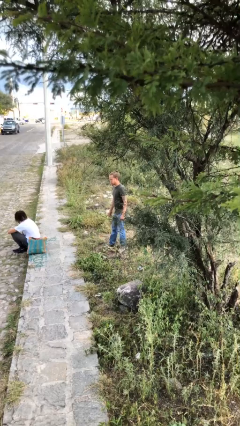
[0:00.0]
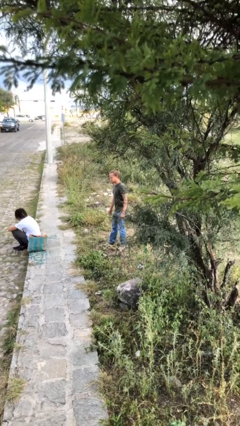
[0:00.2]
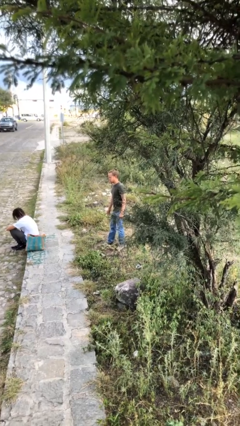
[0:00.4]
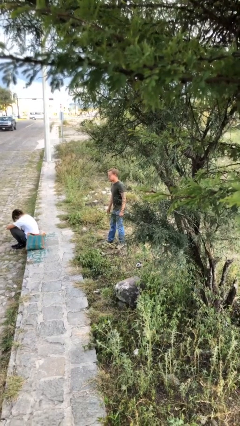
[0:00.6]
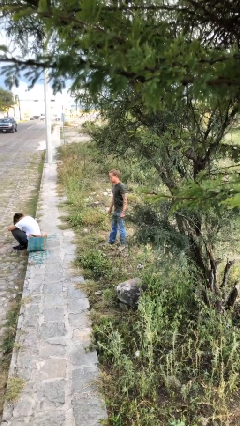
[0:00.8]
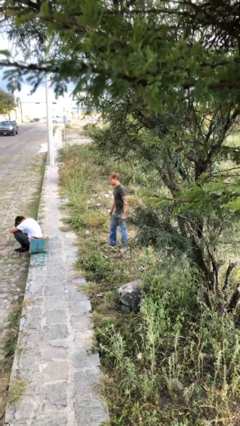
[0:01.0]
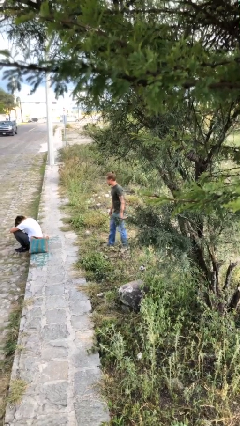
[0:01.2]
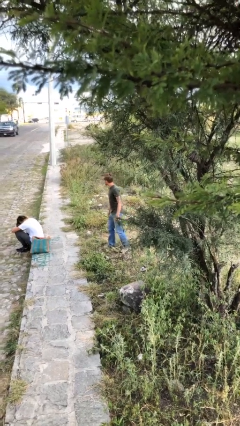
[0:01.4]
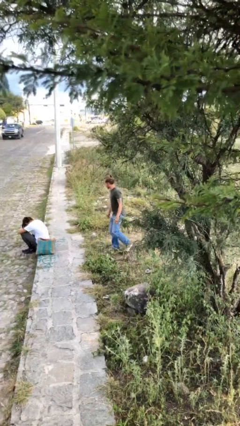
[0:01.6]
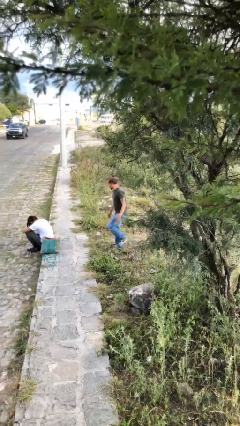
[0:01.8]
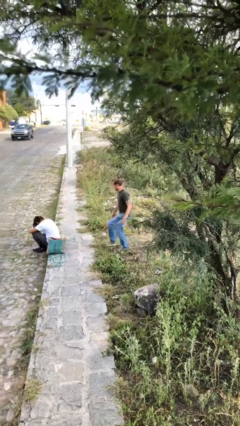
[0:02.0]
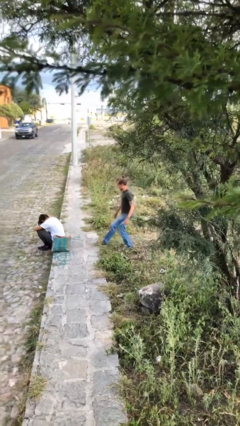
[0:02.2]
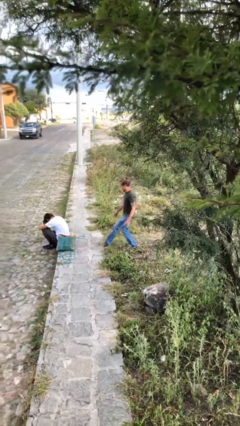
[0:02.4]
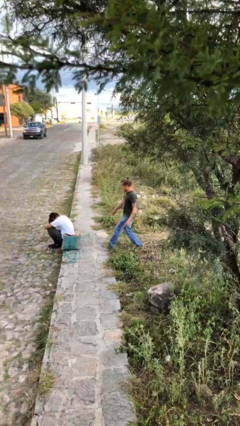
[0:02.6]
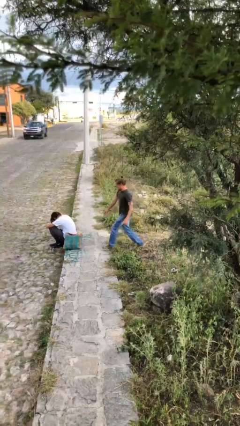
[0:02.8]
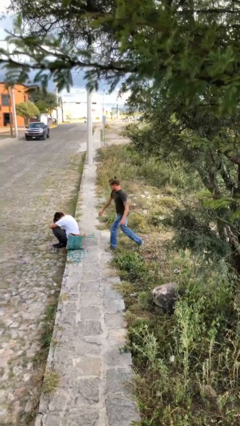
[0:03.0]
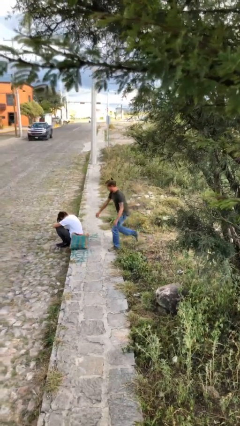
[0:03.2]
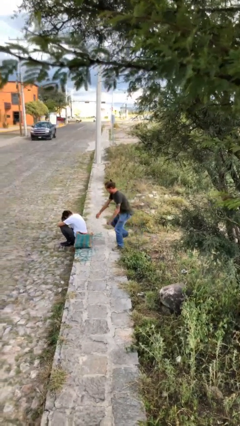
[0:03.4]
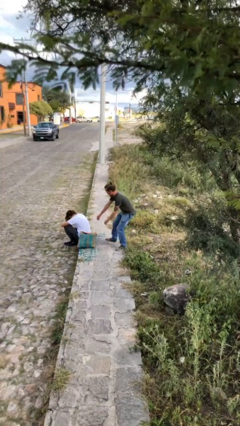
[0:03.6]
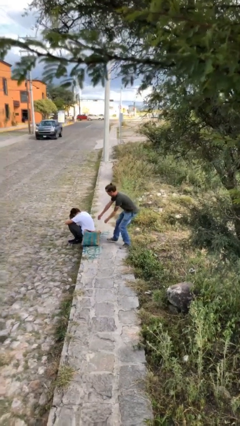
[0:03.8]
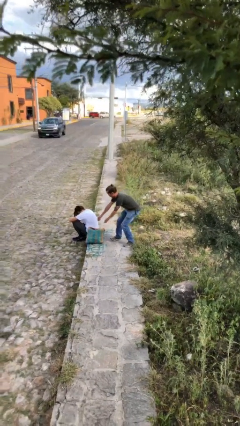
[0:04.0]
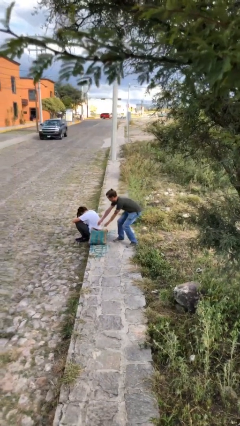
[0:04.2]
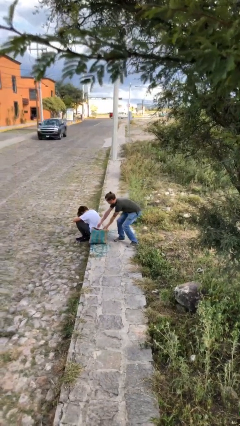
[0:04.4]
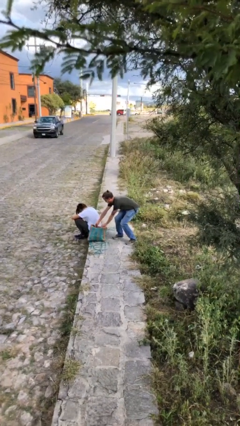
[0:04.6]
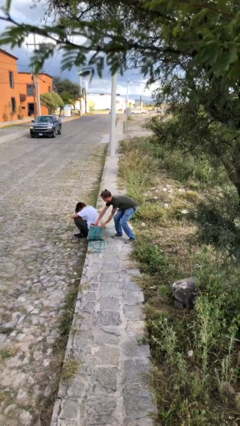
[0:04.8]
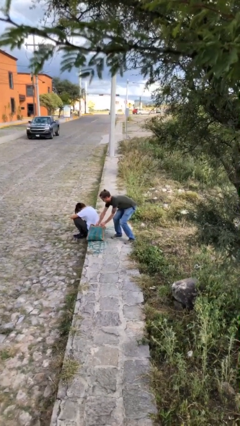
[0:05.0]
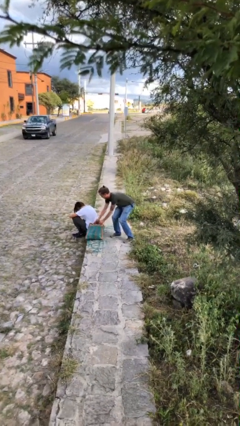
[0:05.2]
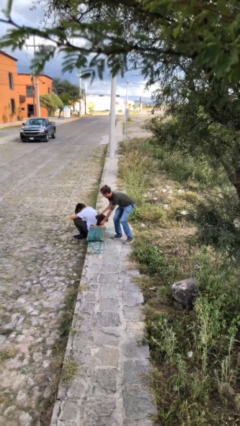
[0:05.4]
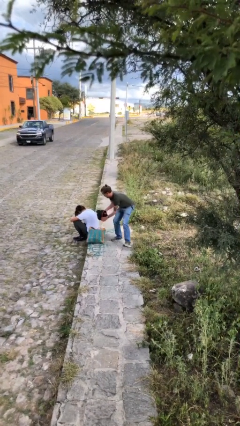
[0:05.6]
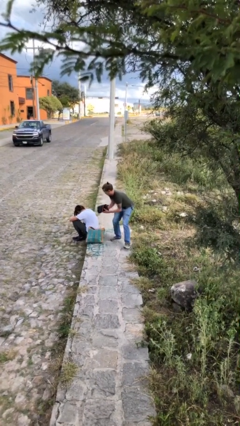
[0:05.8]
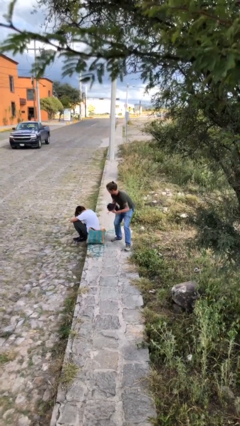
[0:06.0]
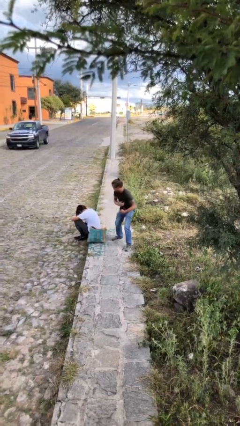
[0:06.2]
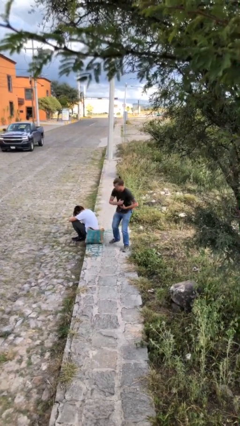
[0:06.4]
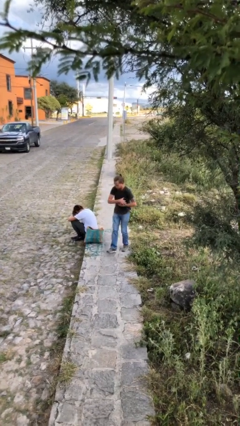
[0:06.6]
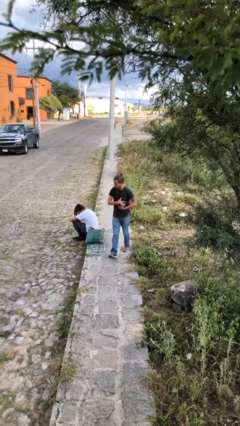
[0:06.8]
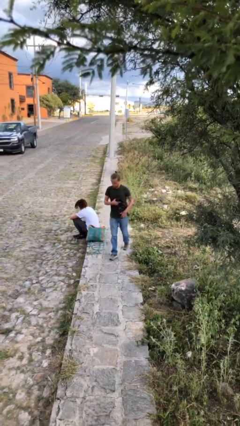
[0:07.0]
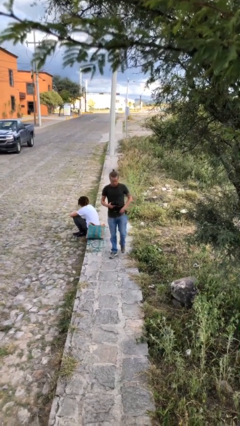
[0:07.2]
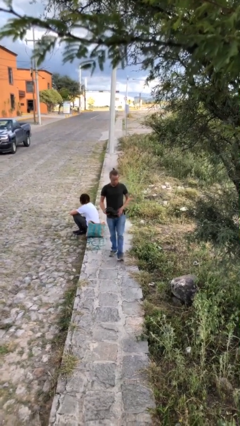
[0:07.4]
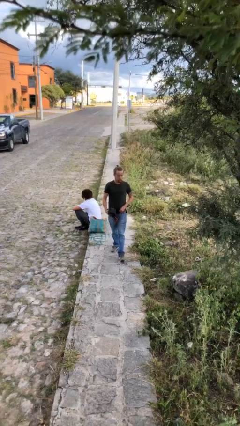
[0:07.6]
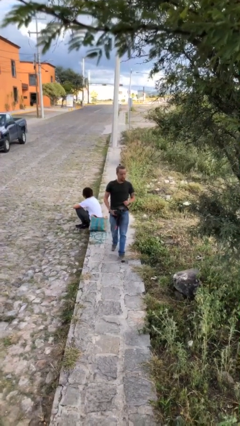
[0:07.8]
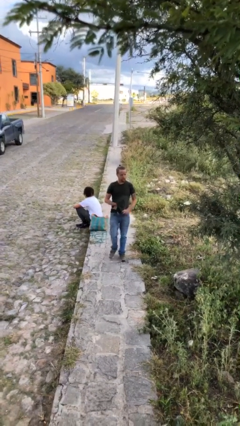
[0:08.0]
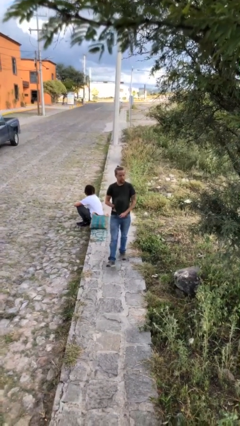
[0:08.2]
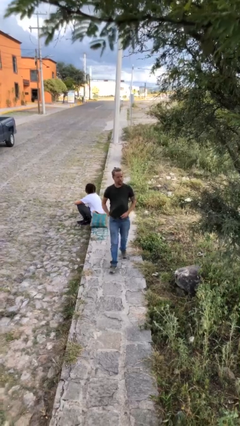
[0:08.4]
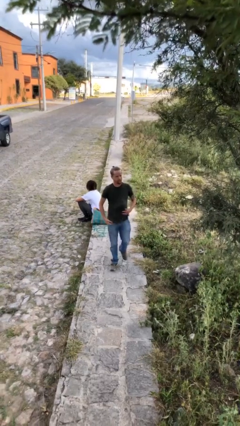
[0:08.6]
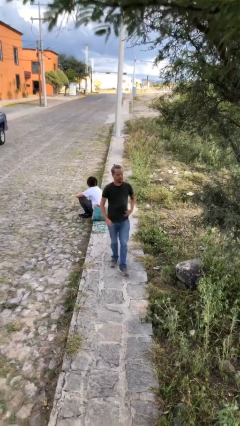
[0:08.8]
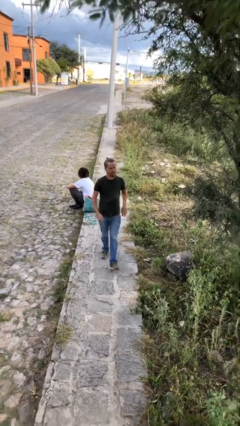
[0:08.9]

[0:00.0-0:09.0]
person steals object from person

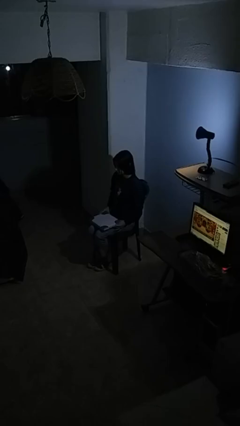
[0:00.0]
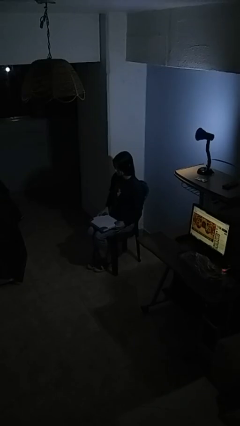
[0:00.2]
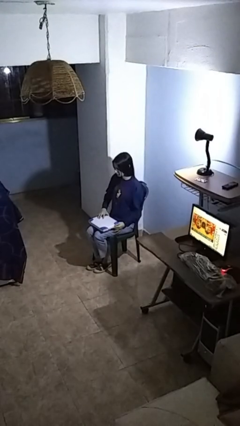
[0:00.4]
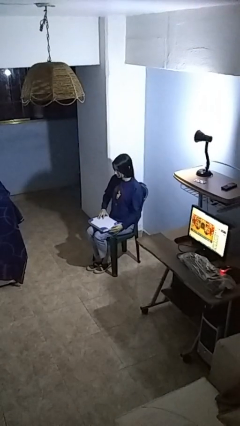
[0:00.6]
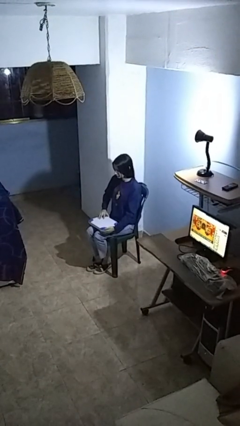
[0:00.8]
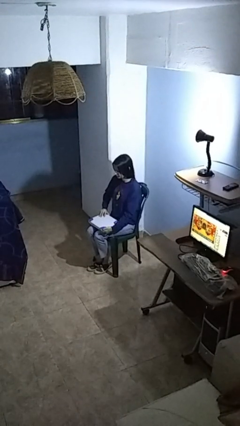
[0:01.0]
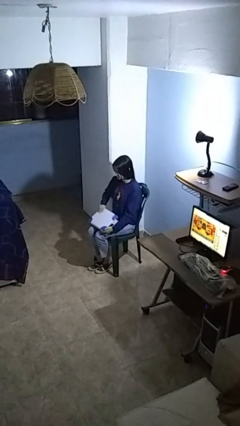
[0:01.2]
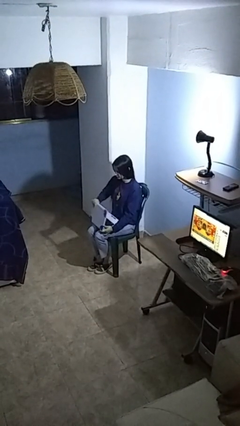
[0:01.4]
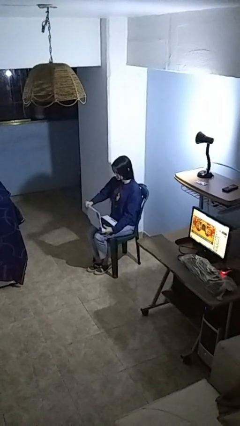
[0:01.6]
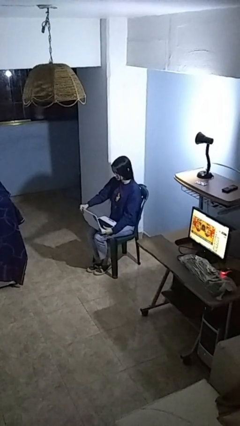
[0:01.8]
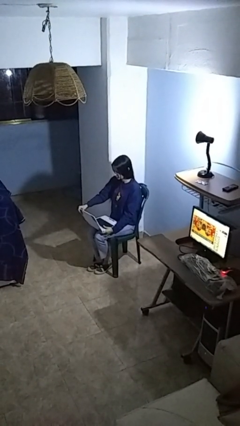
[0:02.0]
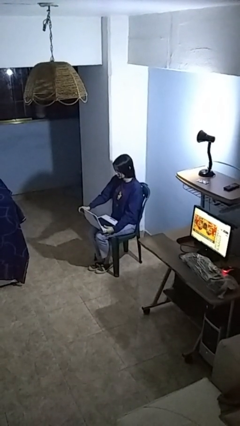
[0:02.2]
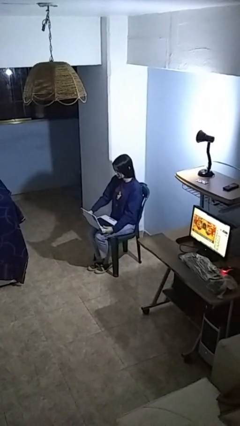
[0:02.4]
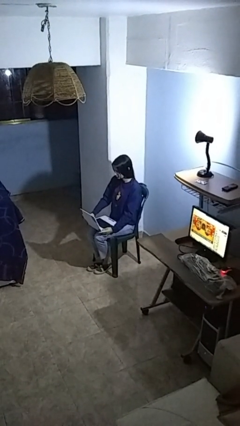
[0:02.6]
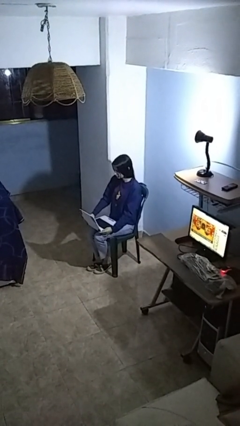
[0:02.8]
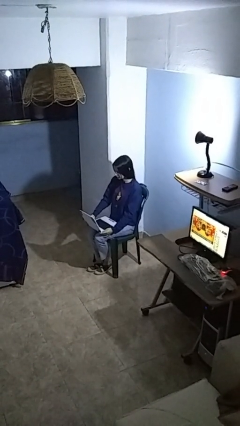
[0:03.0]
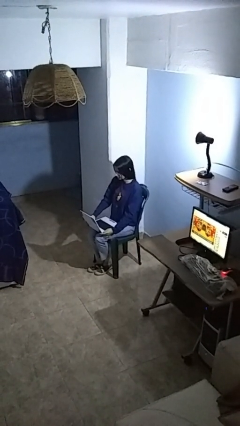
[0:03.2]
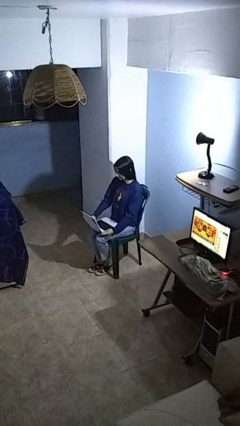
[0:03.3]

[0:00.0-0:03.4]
person opens laptop

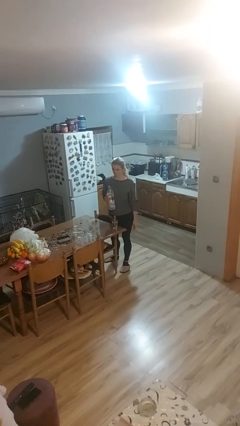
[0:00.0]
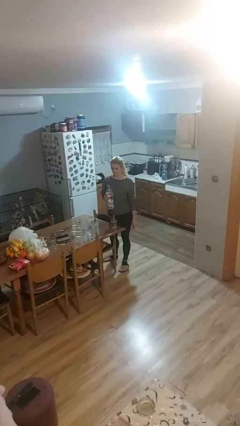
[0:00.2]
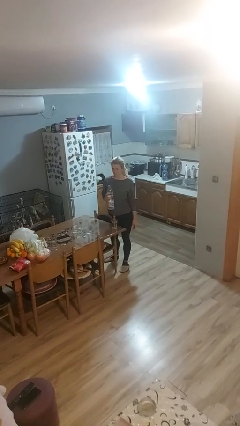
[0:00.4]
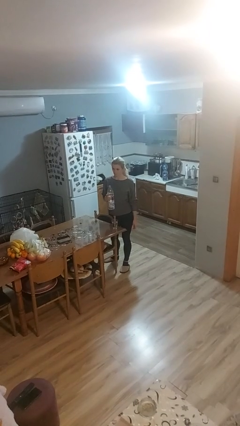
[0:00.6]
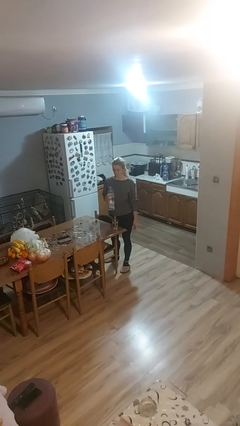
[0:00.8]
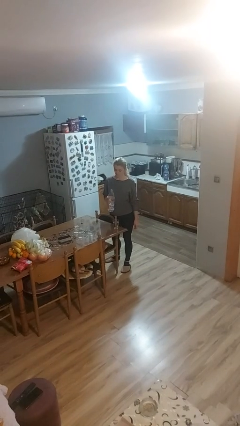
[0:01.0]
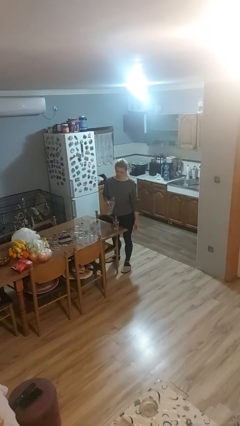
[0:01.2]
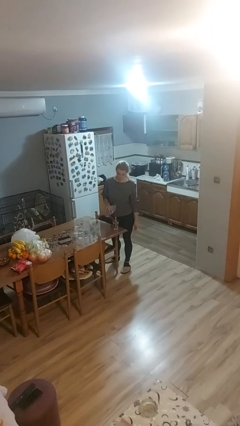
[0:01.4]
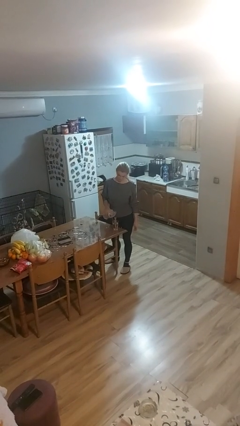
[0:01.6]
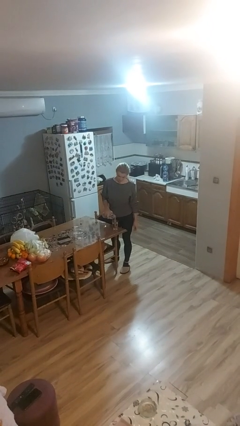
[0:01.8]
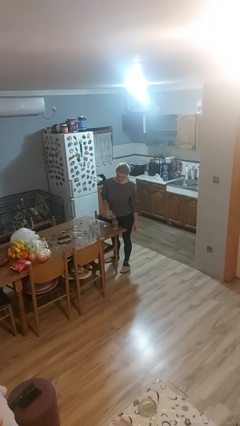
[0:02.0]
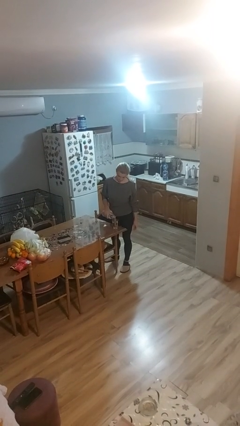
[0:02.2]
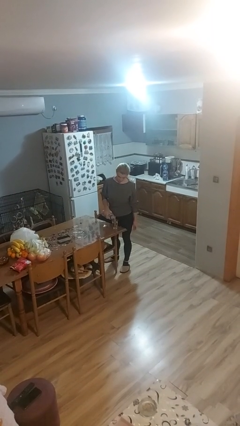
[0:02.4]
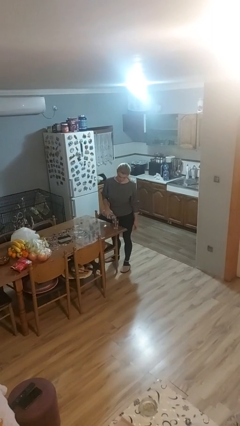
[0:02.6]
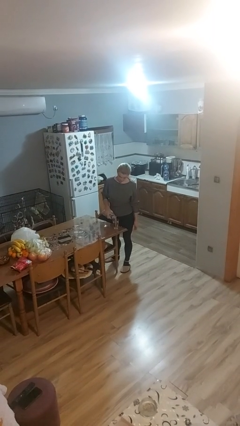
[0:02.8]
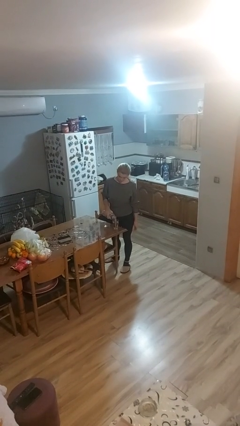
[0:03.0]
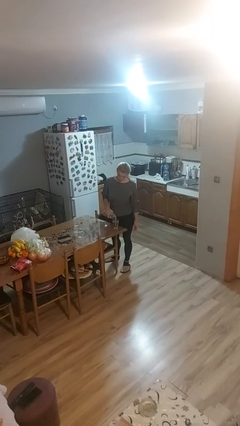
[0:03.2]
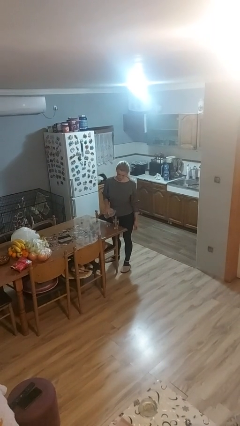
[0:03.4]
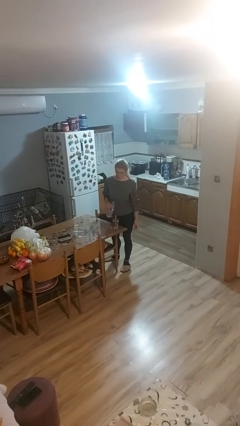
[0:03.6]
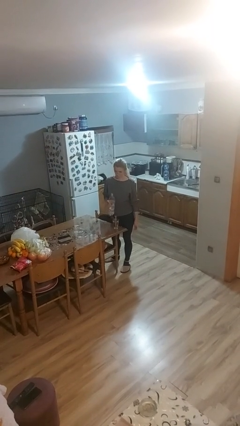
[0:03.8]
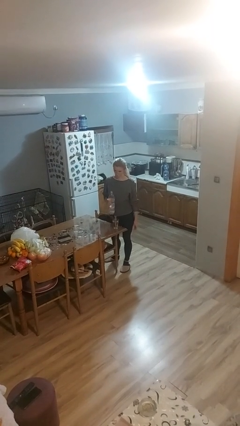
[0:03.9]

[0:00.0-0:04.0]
person pours liquid into cup

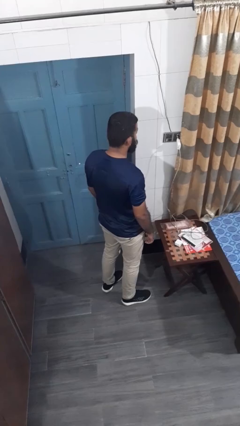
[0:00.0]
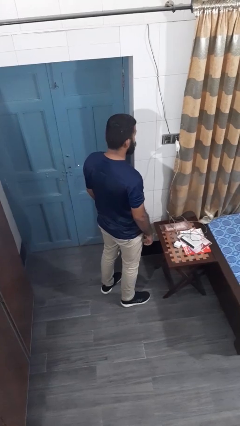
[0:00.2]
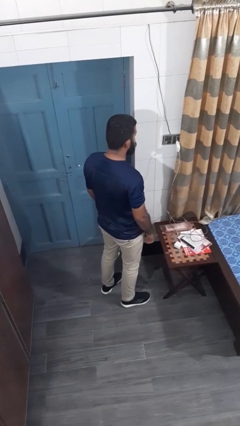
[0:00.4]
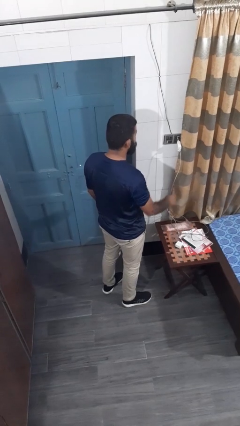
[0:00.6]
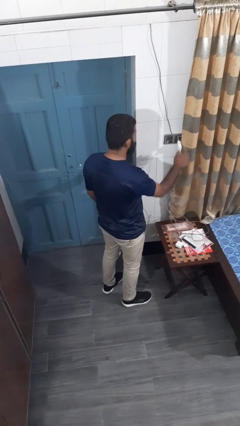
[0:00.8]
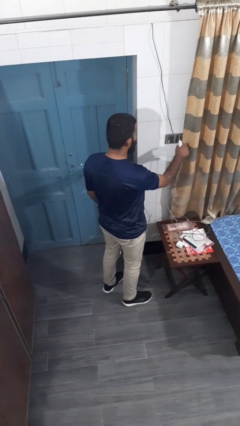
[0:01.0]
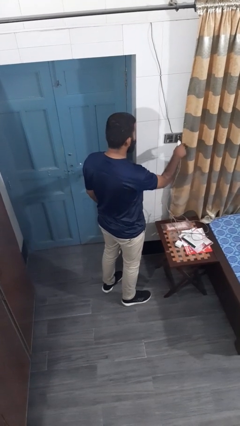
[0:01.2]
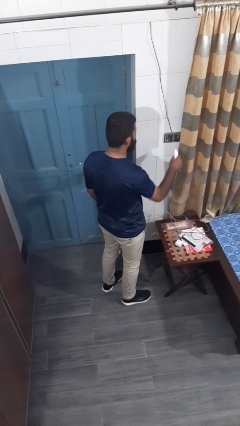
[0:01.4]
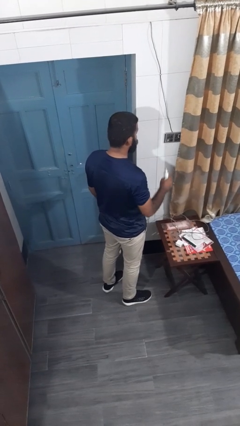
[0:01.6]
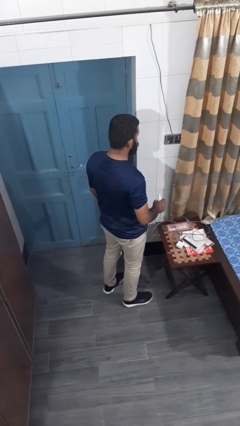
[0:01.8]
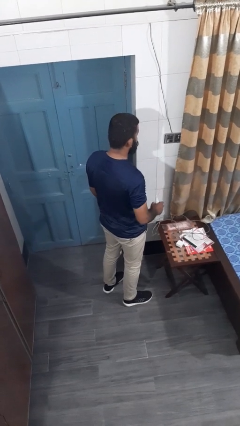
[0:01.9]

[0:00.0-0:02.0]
person unplugs from electrical socket
